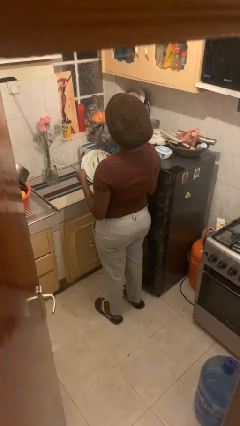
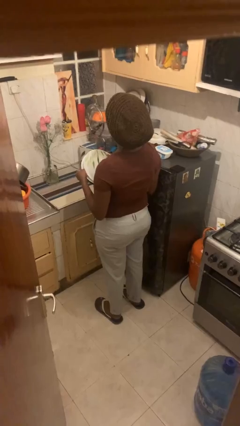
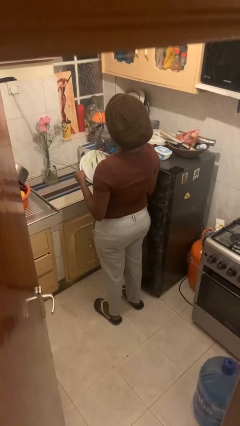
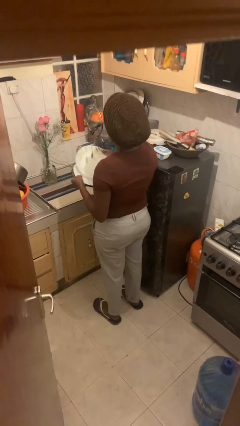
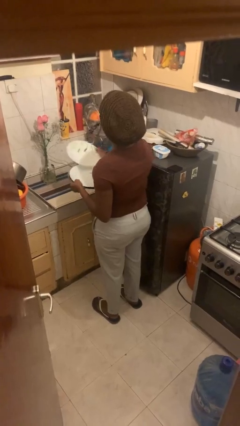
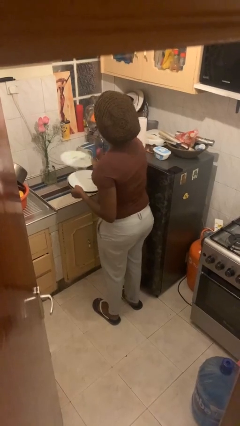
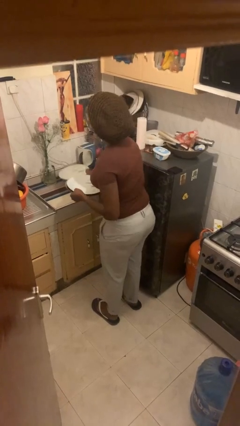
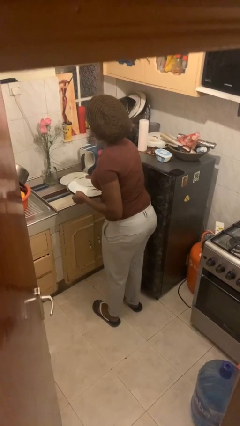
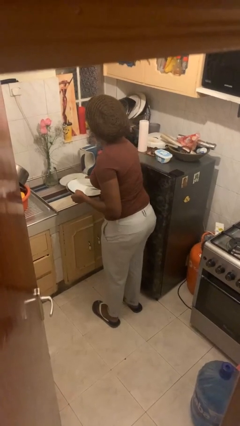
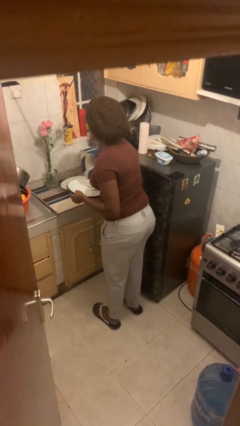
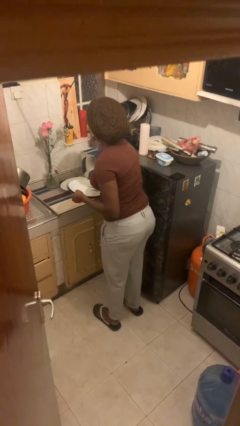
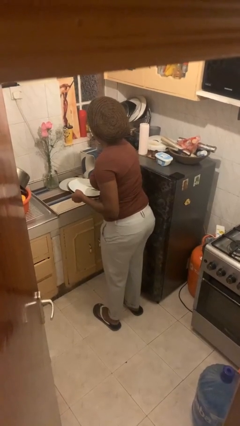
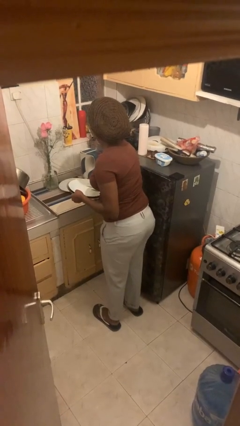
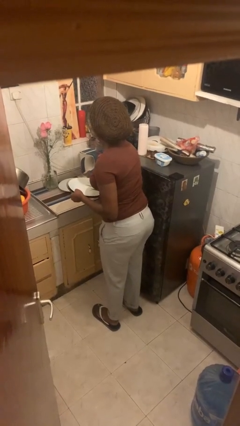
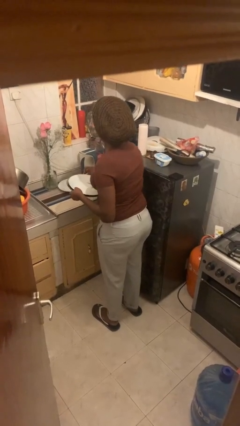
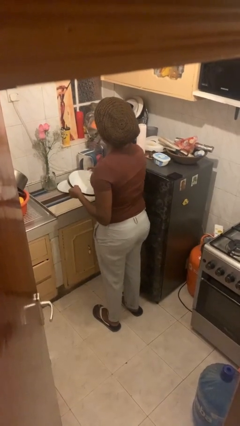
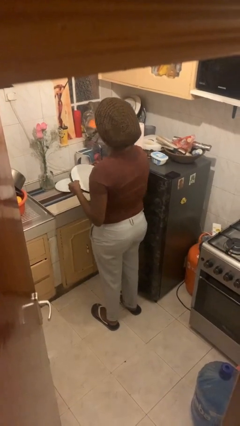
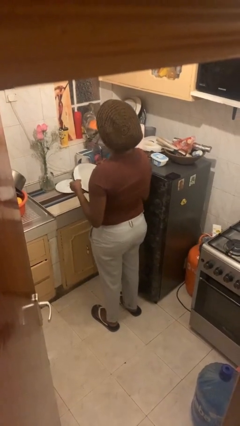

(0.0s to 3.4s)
person sets table

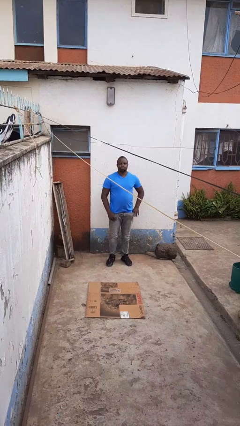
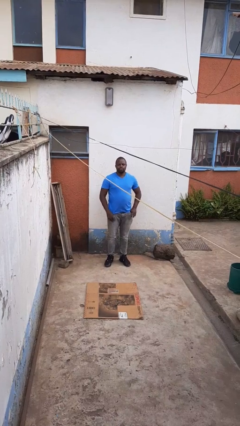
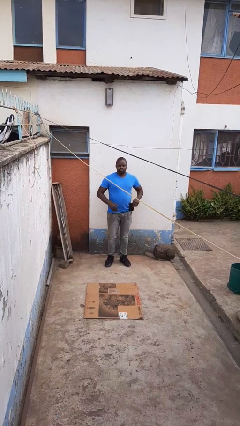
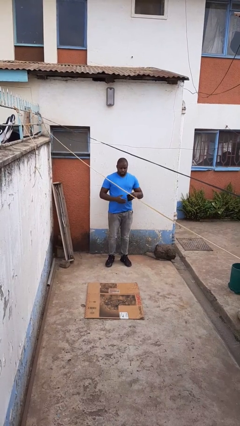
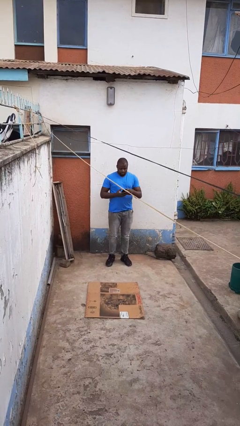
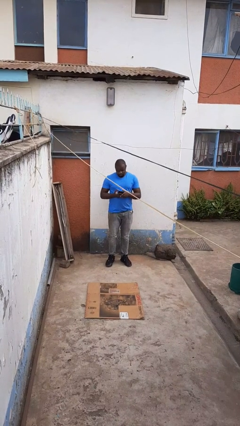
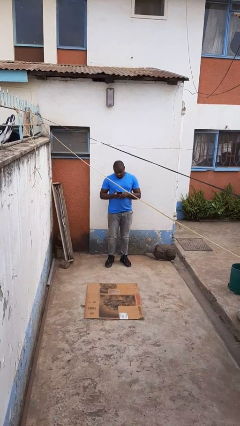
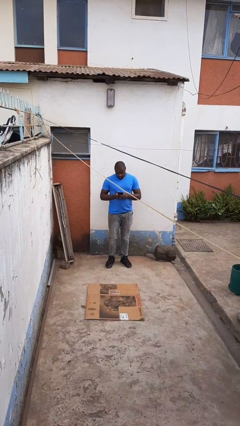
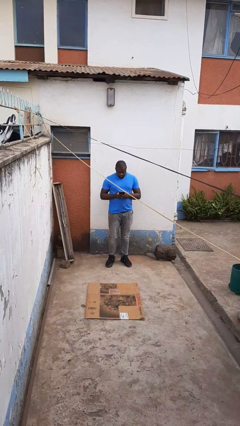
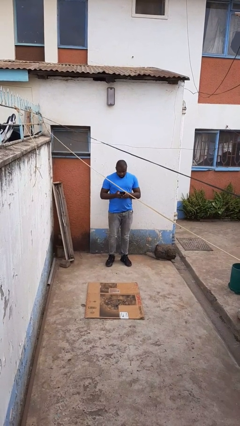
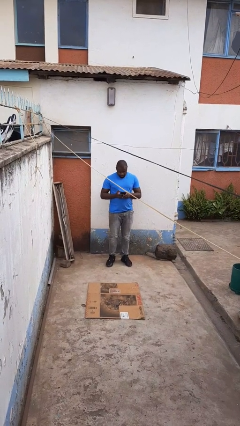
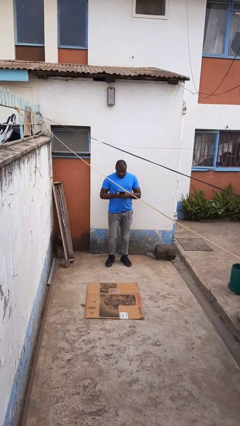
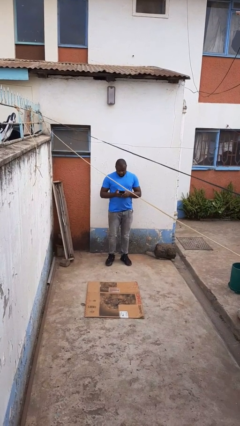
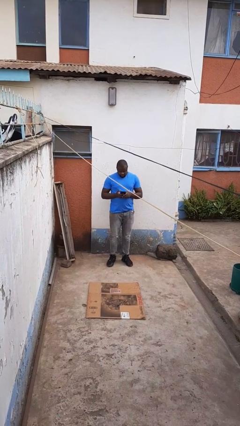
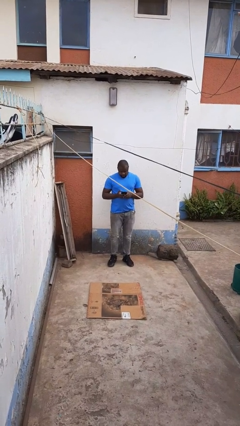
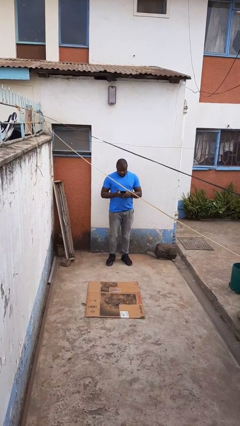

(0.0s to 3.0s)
person takes phone from pocket

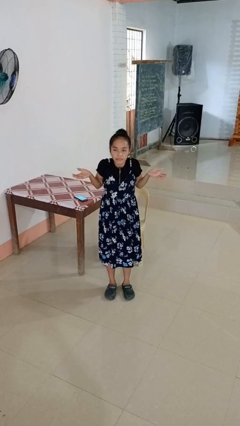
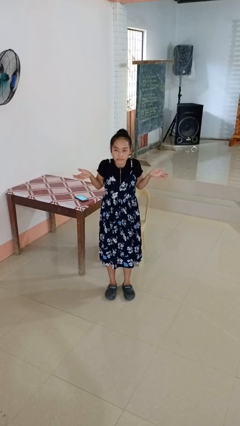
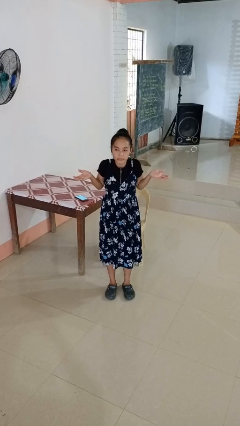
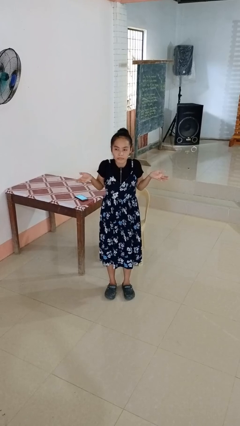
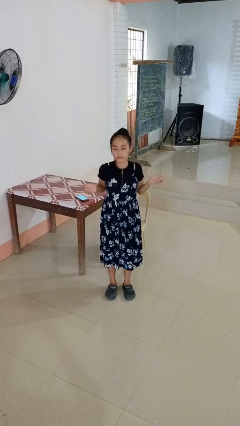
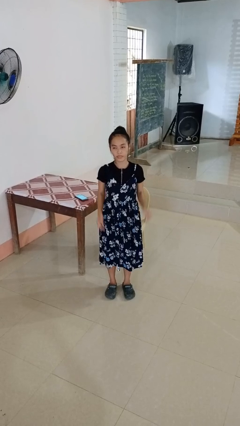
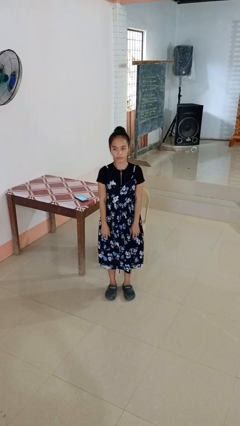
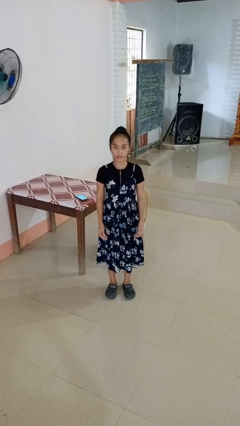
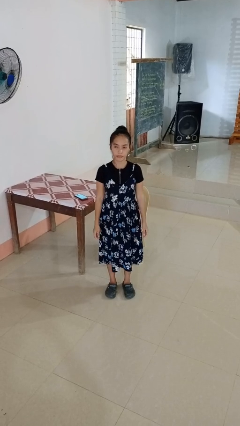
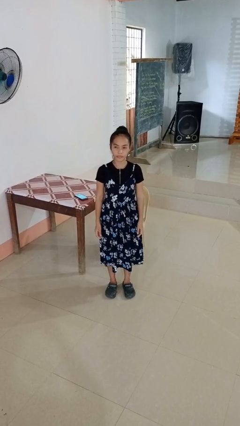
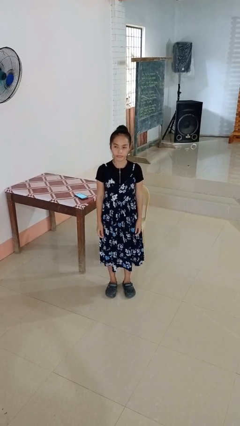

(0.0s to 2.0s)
person shrugs

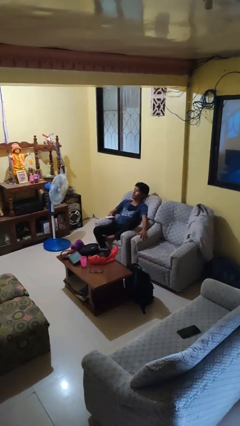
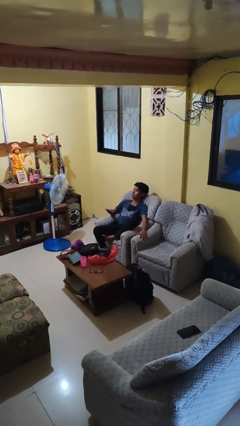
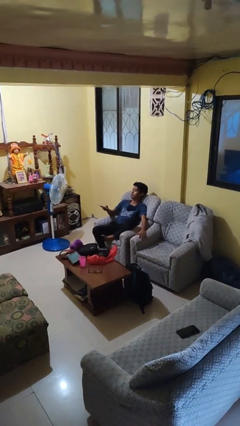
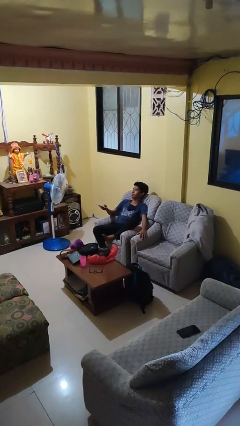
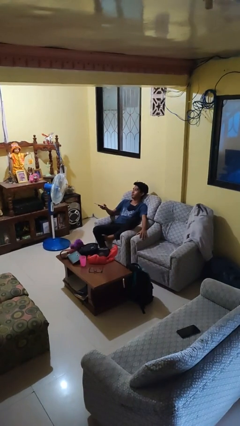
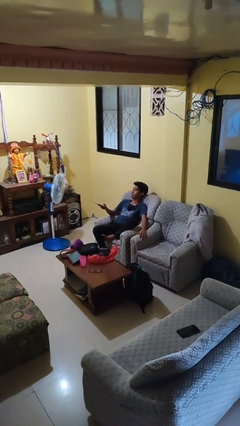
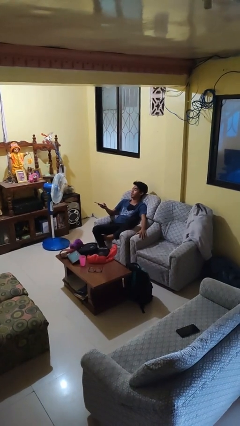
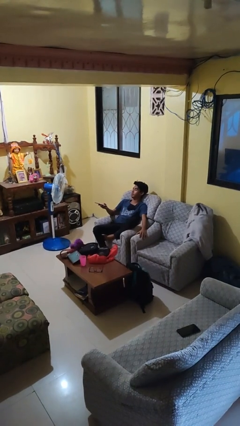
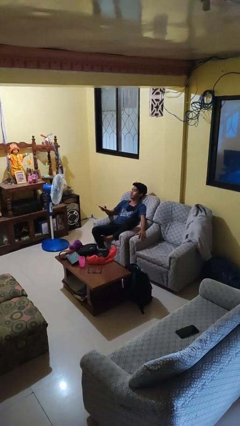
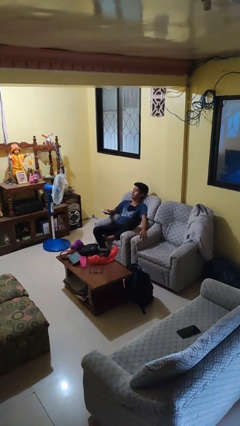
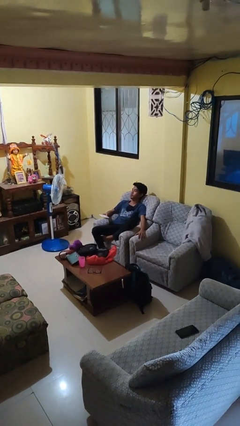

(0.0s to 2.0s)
person uses television remote

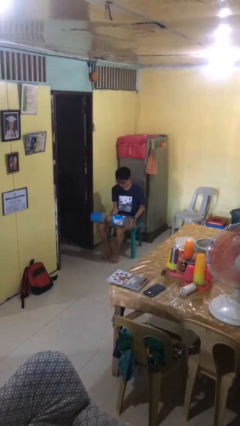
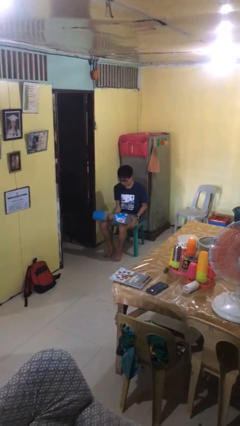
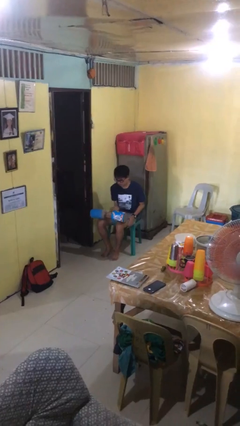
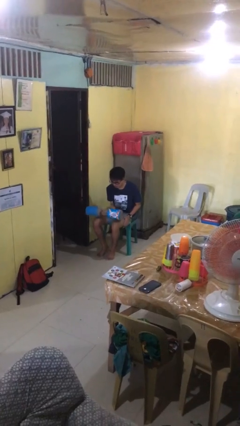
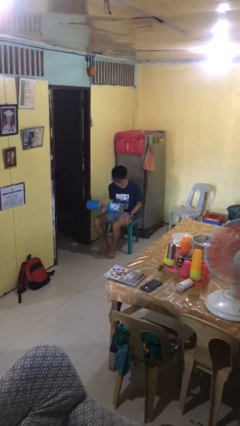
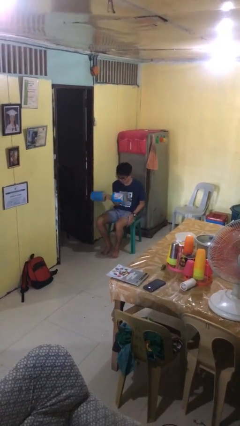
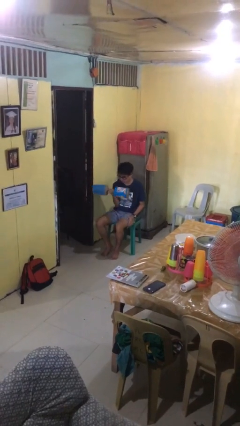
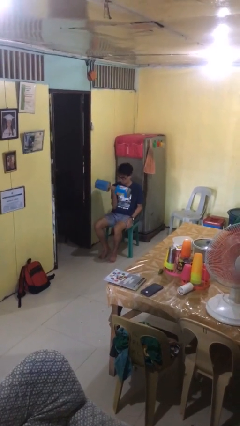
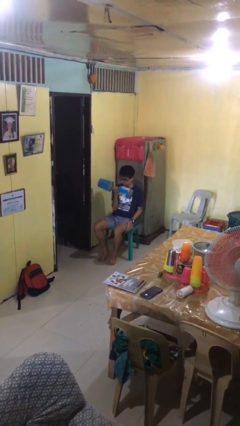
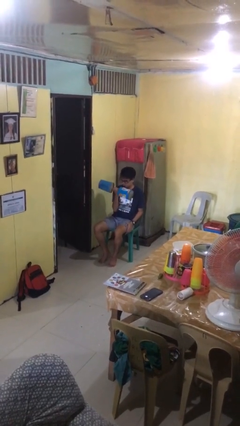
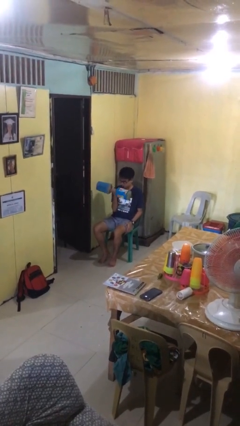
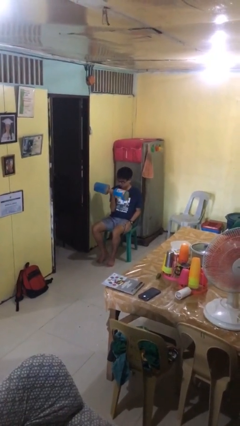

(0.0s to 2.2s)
person lifts dumbbells

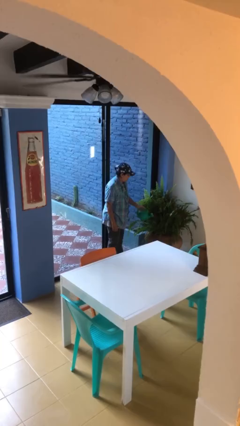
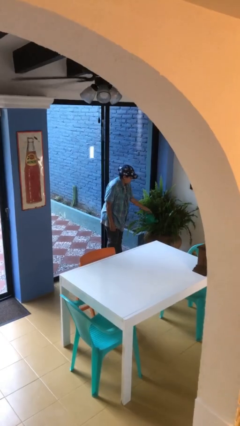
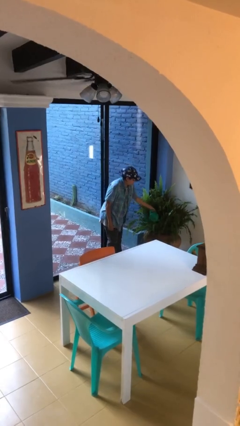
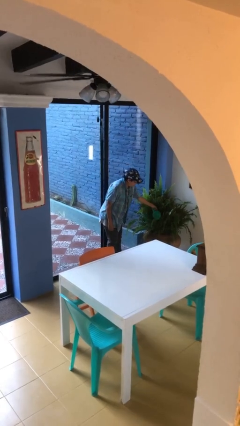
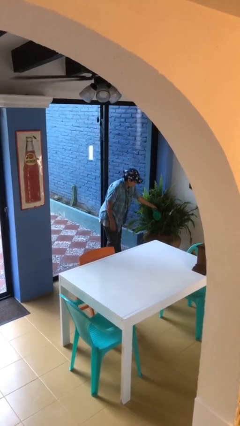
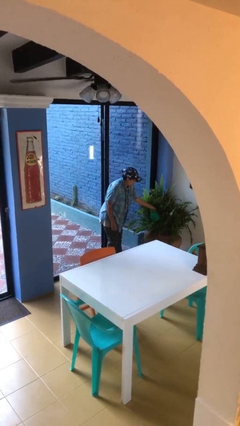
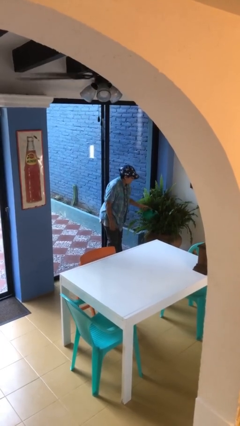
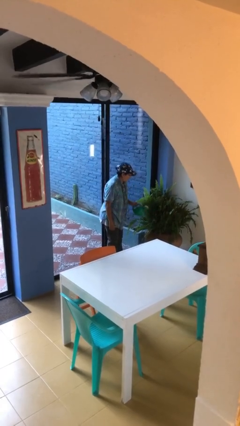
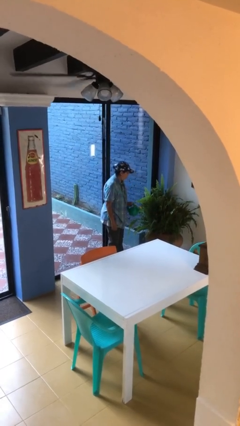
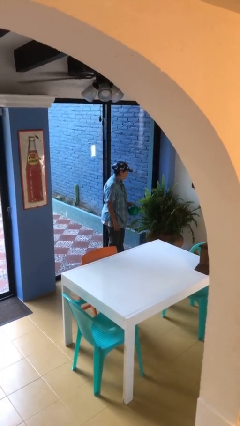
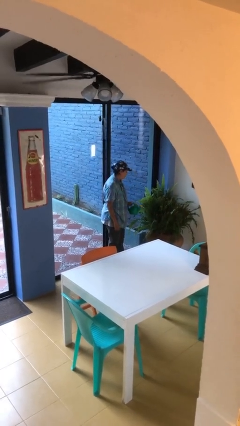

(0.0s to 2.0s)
person waters houseplant

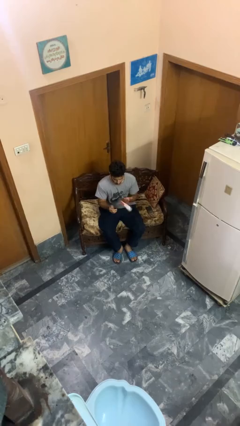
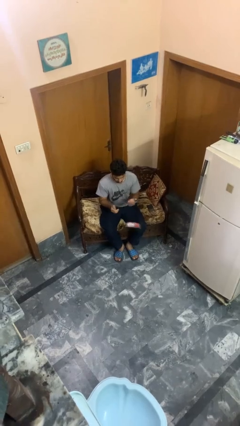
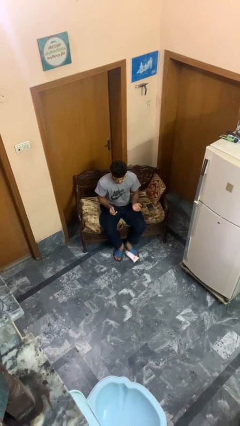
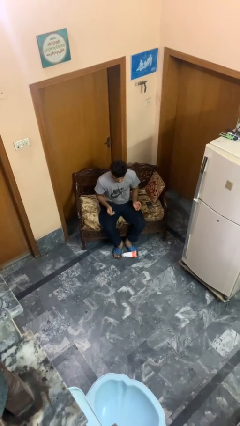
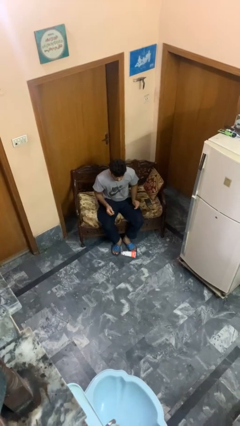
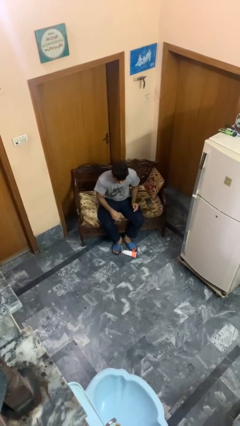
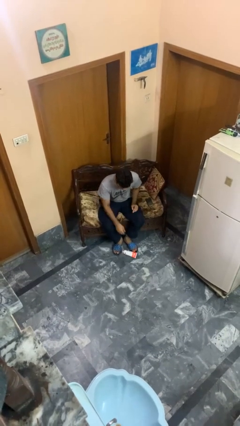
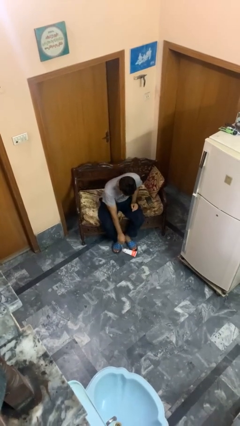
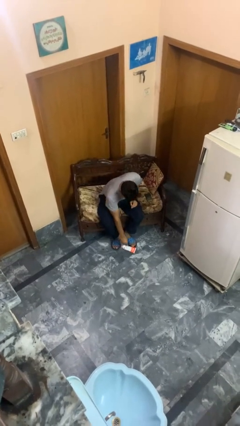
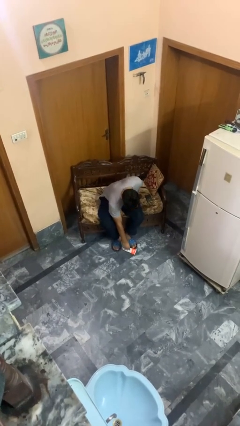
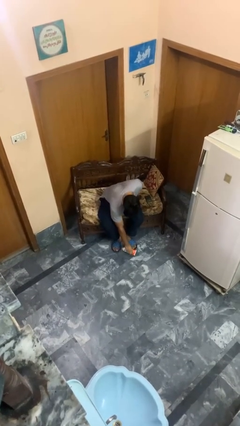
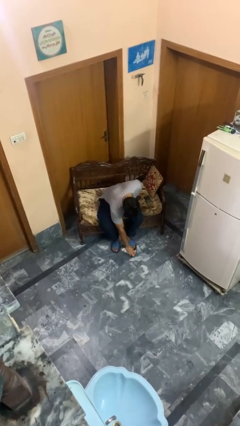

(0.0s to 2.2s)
person drops object

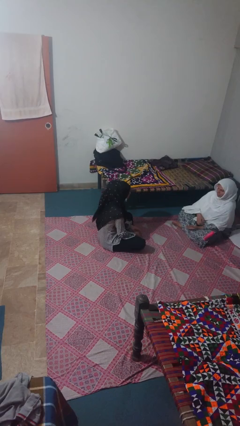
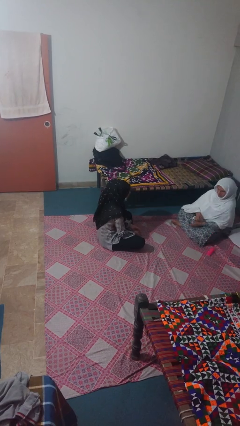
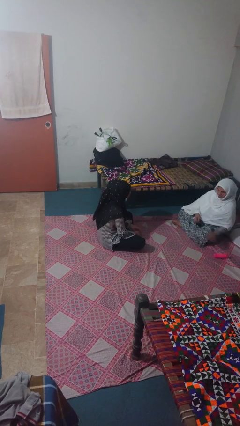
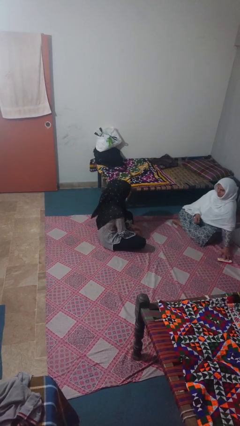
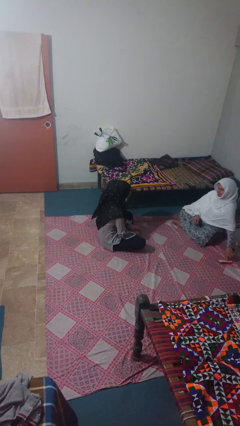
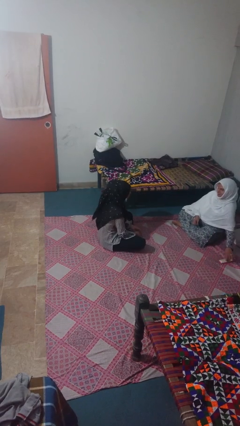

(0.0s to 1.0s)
person catches object from person
